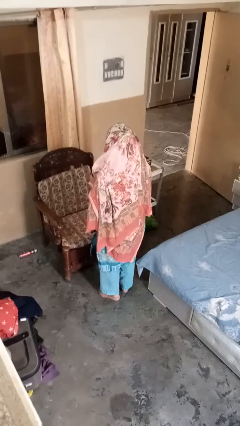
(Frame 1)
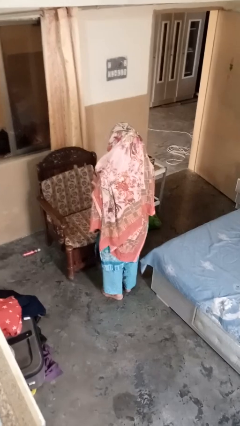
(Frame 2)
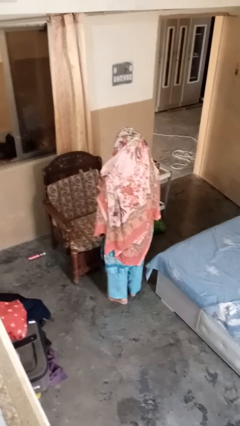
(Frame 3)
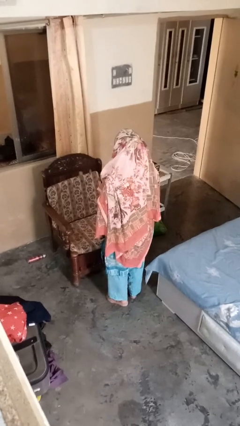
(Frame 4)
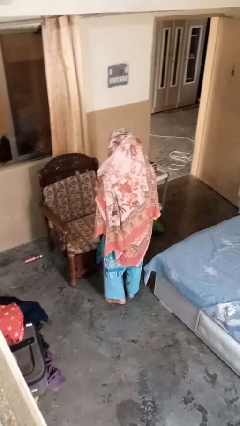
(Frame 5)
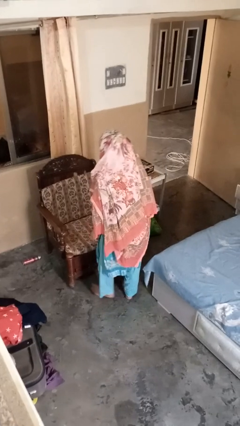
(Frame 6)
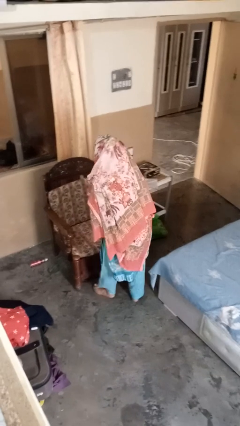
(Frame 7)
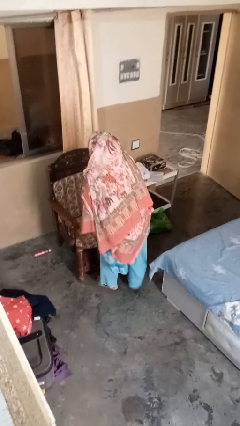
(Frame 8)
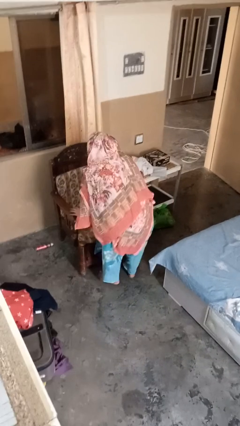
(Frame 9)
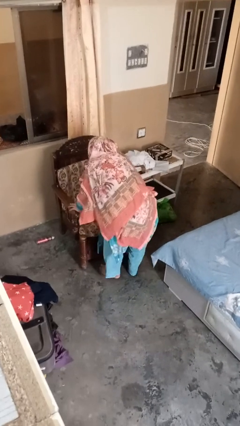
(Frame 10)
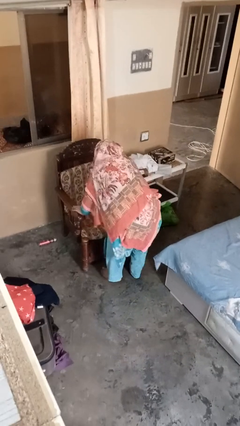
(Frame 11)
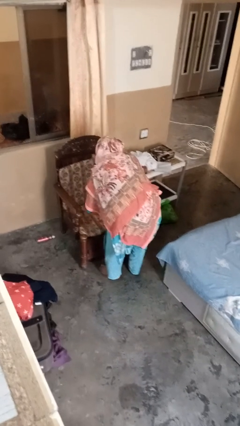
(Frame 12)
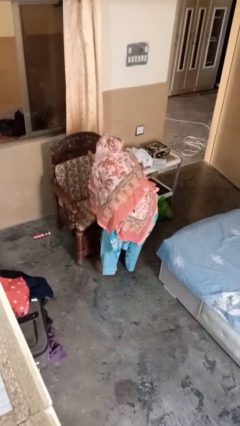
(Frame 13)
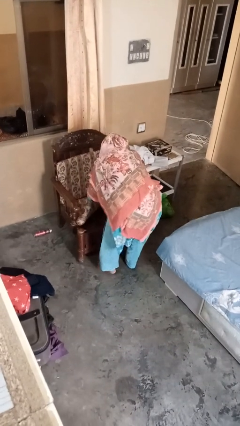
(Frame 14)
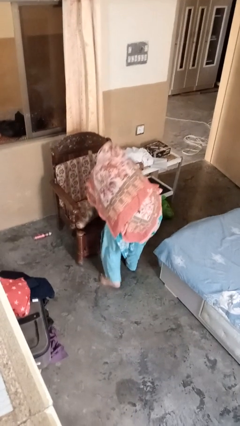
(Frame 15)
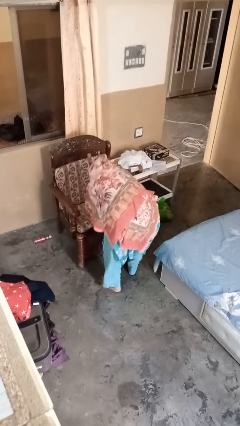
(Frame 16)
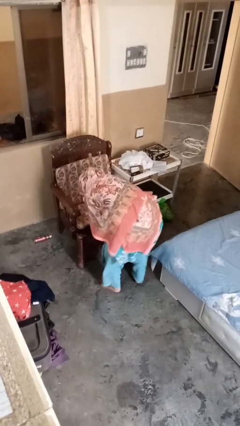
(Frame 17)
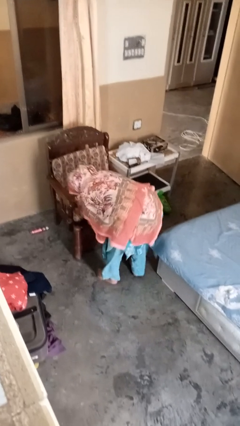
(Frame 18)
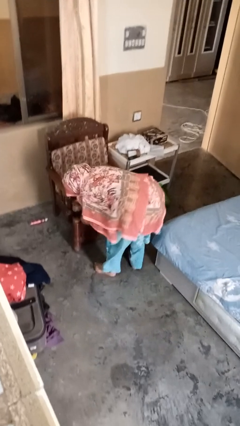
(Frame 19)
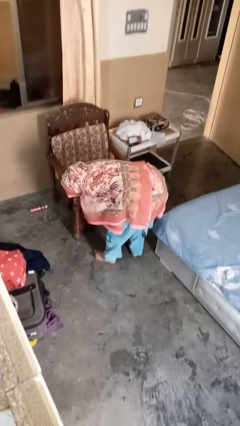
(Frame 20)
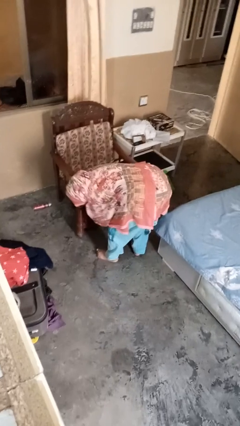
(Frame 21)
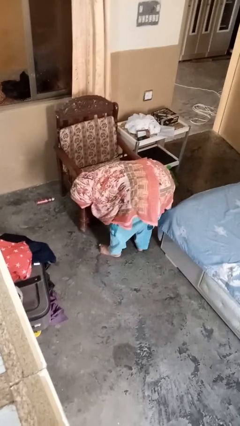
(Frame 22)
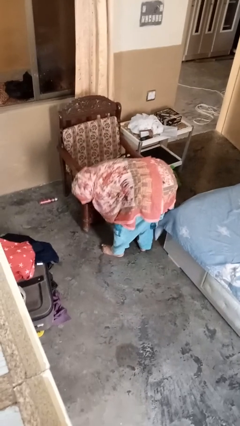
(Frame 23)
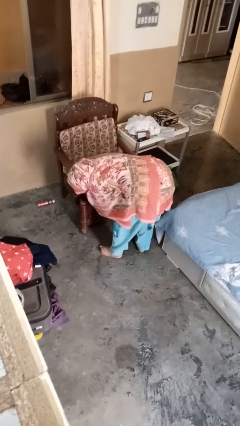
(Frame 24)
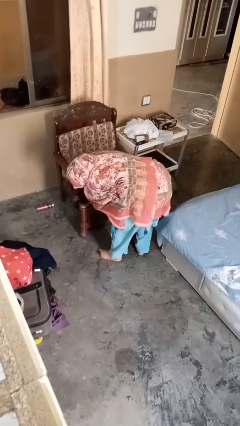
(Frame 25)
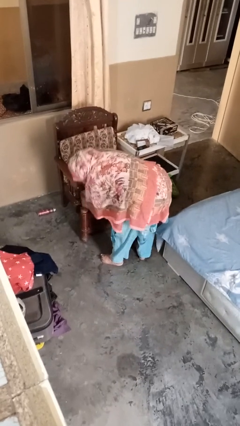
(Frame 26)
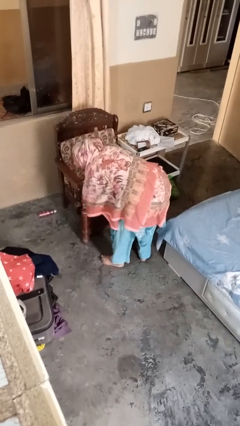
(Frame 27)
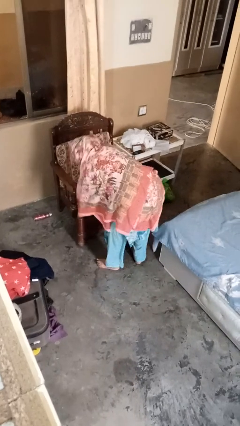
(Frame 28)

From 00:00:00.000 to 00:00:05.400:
person searches under couch

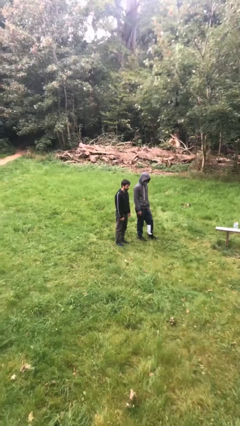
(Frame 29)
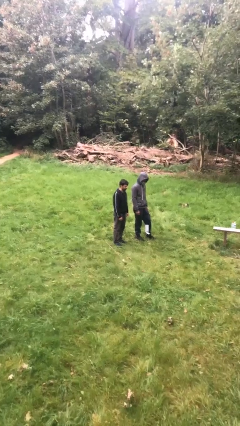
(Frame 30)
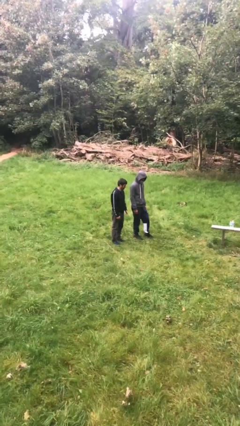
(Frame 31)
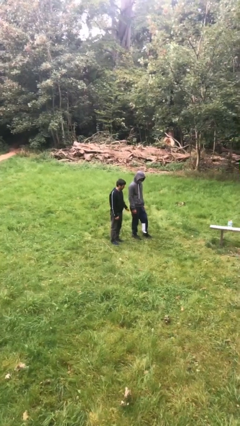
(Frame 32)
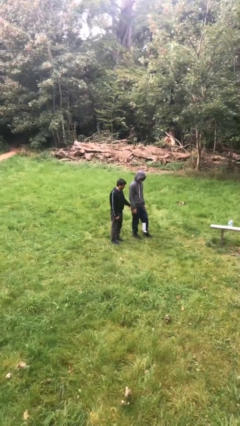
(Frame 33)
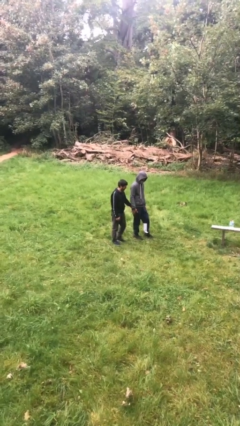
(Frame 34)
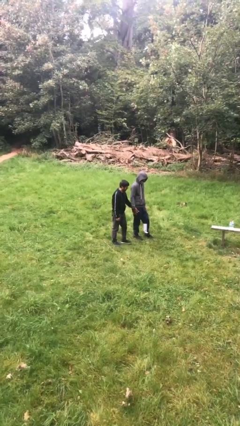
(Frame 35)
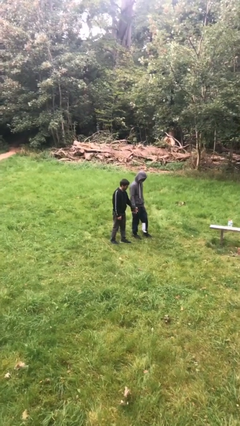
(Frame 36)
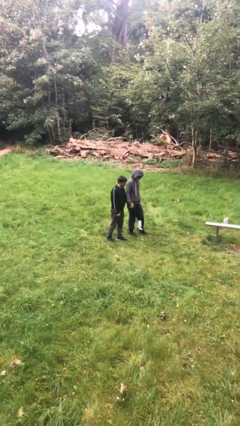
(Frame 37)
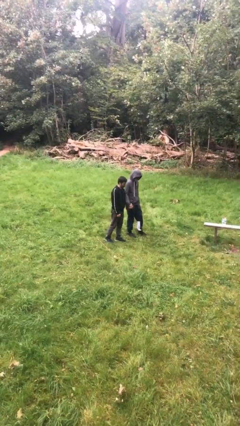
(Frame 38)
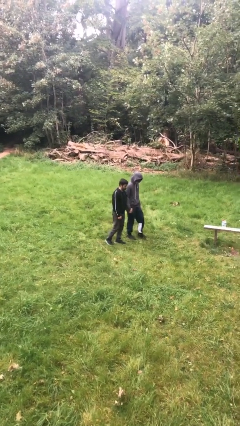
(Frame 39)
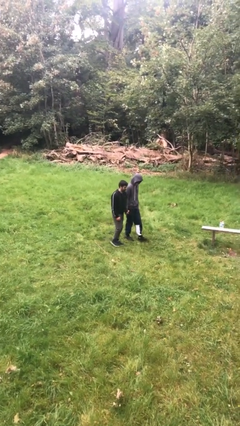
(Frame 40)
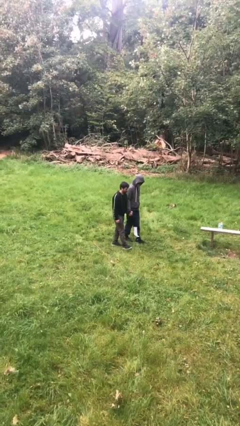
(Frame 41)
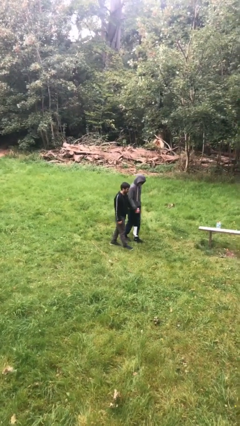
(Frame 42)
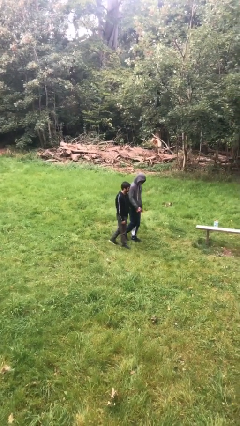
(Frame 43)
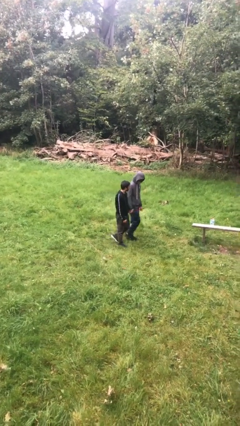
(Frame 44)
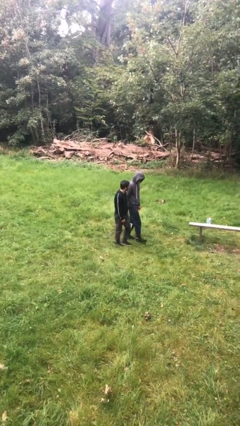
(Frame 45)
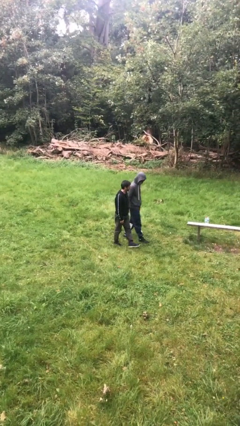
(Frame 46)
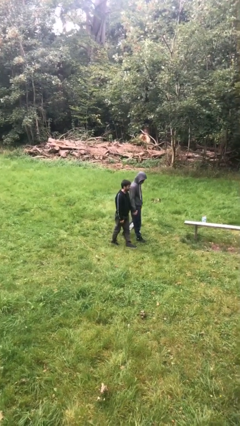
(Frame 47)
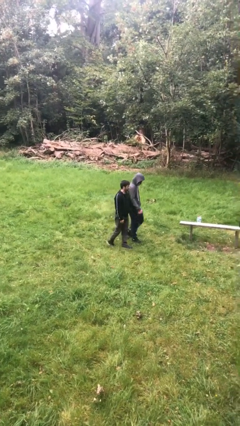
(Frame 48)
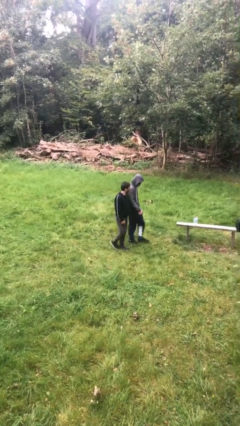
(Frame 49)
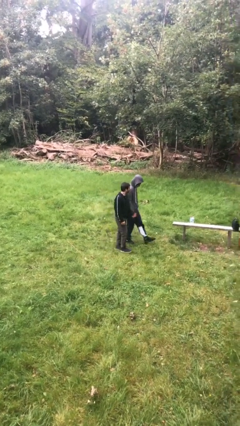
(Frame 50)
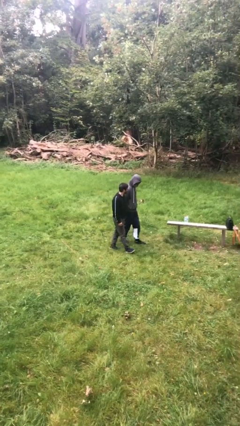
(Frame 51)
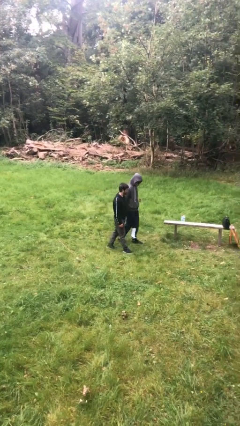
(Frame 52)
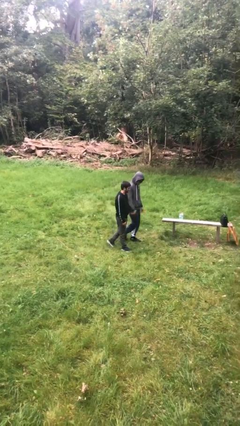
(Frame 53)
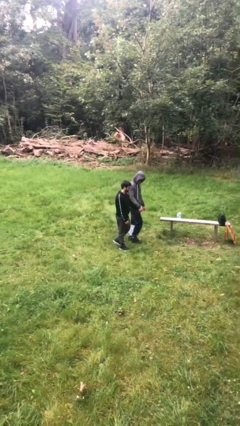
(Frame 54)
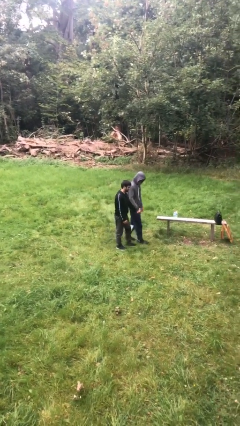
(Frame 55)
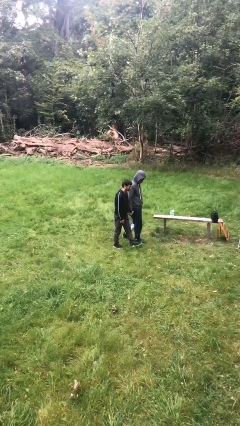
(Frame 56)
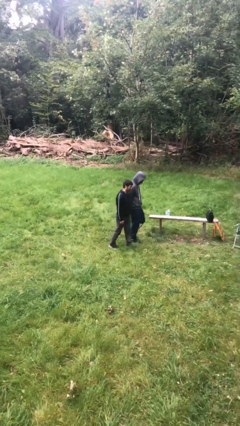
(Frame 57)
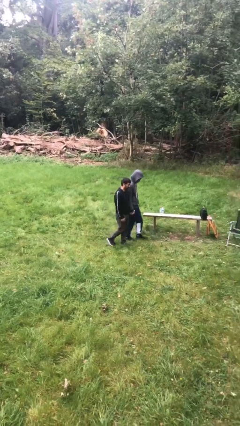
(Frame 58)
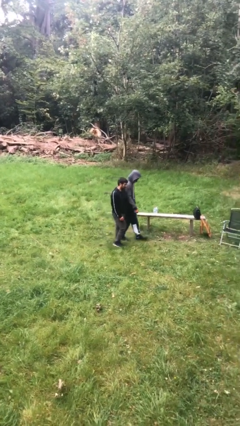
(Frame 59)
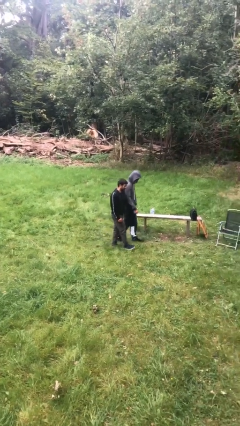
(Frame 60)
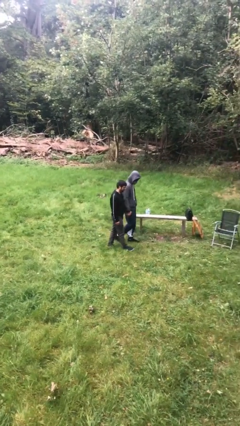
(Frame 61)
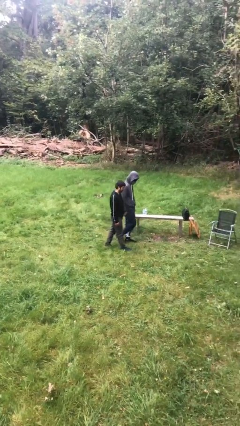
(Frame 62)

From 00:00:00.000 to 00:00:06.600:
person holds hand

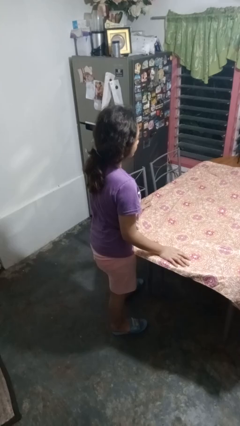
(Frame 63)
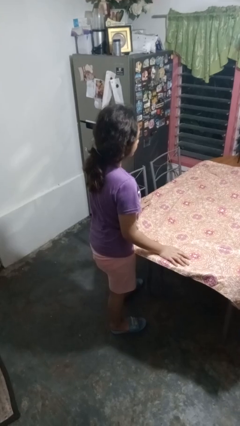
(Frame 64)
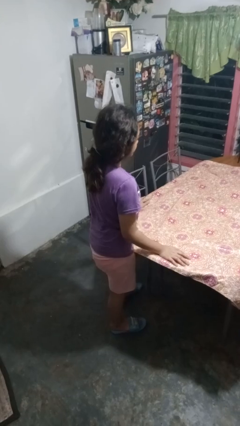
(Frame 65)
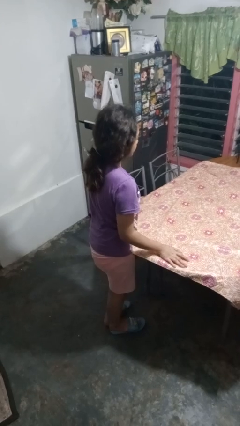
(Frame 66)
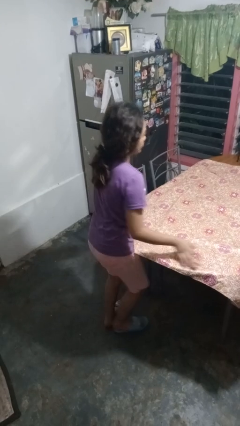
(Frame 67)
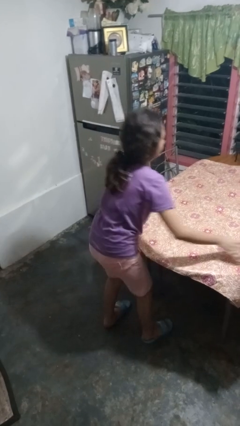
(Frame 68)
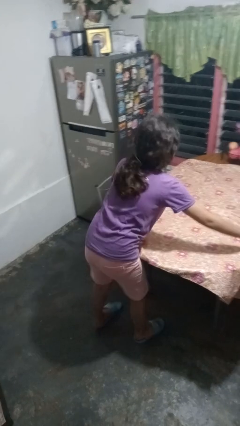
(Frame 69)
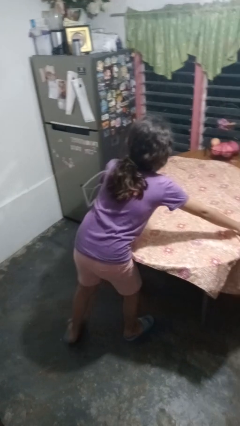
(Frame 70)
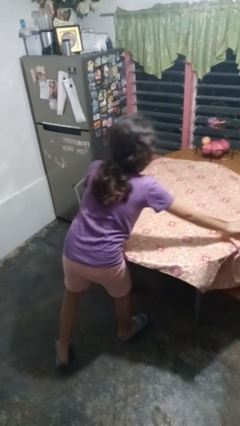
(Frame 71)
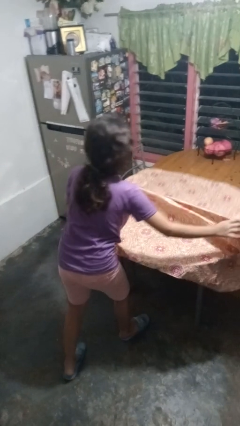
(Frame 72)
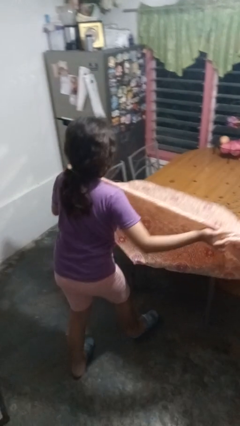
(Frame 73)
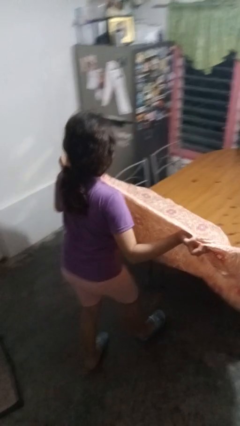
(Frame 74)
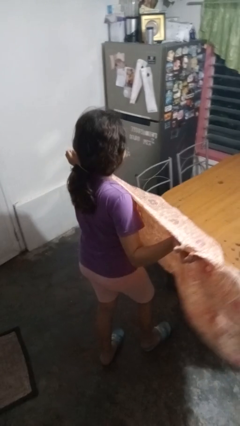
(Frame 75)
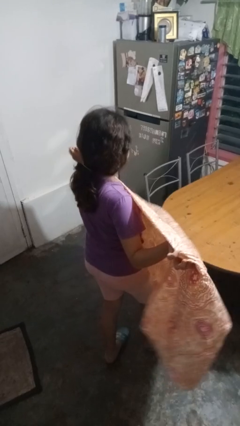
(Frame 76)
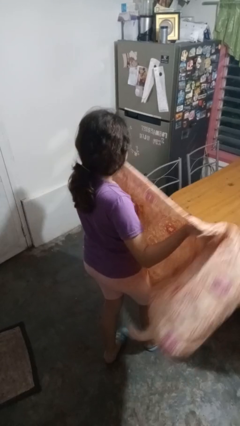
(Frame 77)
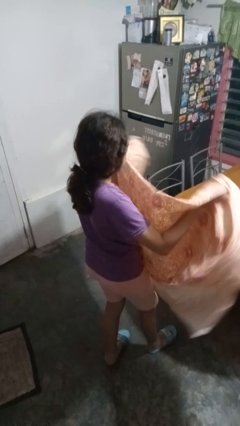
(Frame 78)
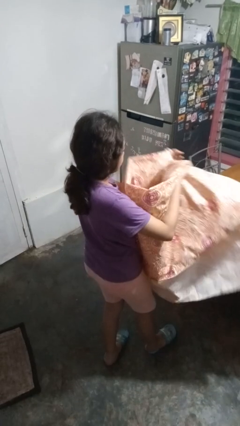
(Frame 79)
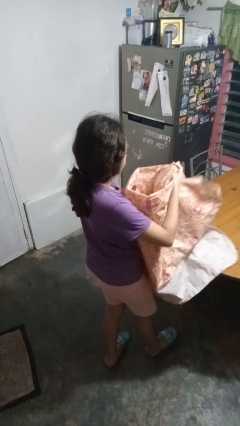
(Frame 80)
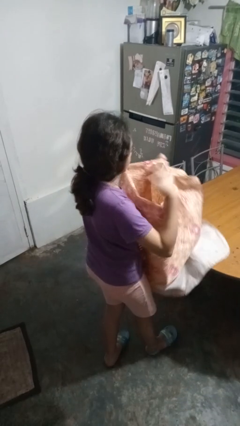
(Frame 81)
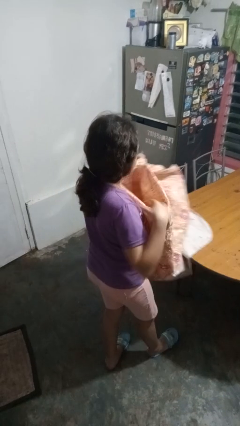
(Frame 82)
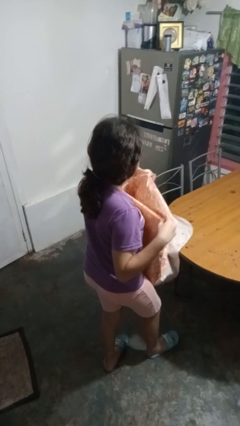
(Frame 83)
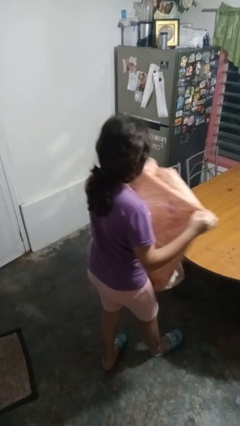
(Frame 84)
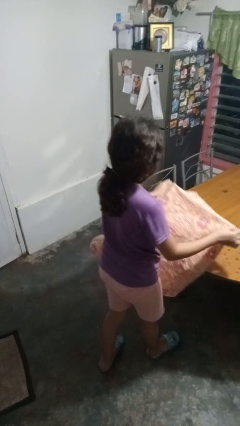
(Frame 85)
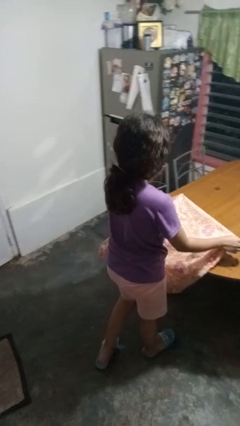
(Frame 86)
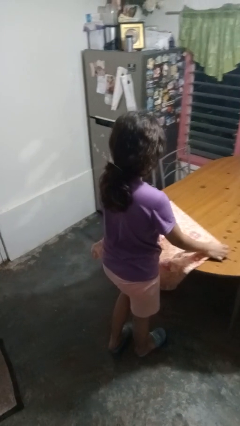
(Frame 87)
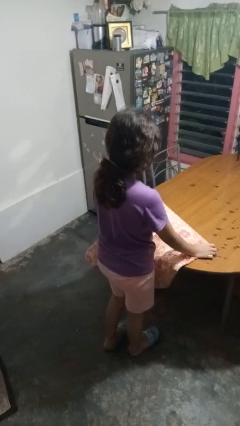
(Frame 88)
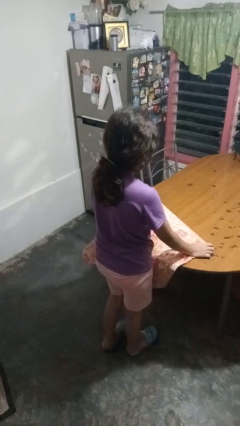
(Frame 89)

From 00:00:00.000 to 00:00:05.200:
person folds tablecloth
